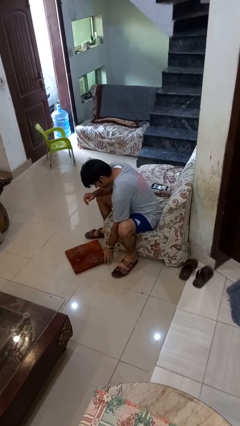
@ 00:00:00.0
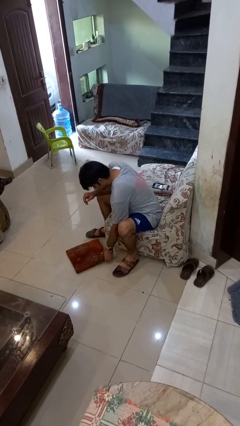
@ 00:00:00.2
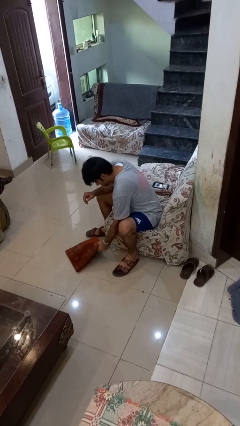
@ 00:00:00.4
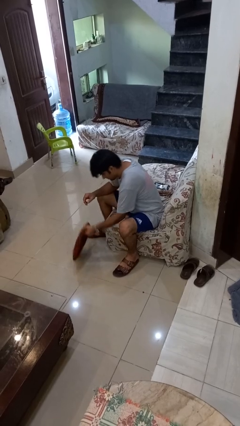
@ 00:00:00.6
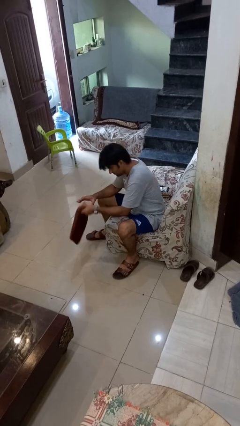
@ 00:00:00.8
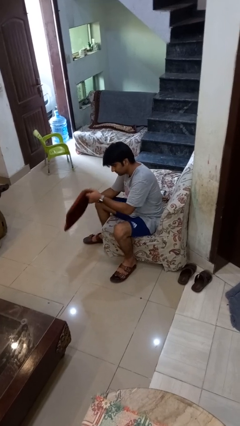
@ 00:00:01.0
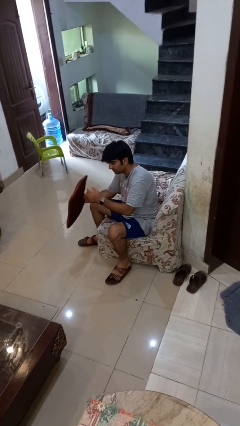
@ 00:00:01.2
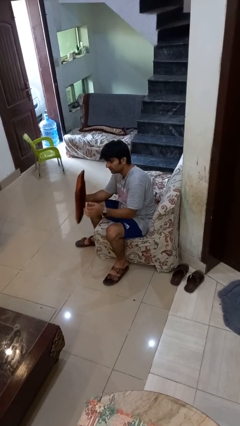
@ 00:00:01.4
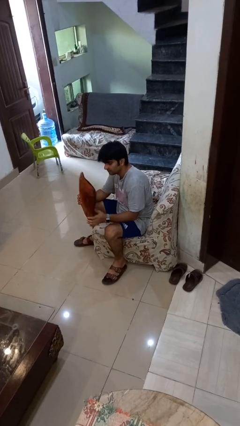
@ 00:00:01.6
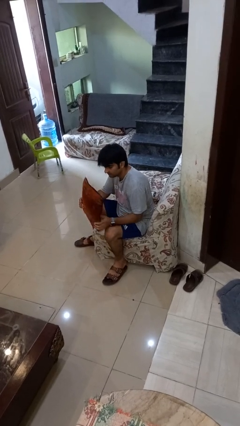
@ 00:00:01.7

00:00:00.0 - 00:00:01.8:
person picks up object from floor

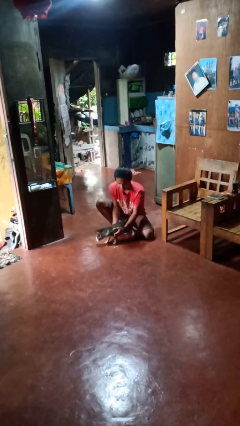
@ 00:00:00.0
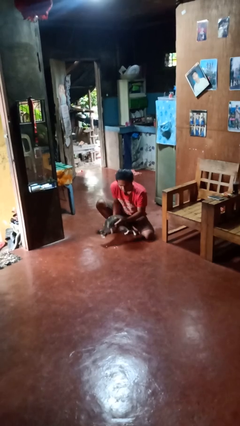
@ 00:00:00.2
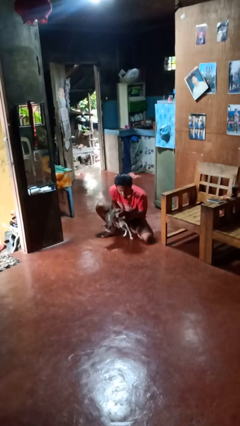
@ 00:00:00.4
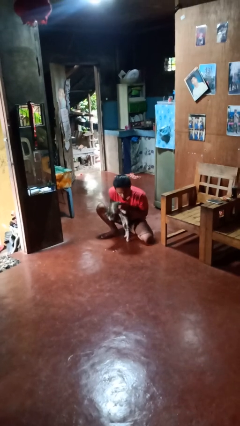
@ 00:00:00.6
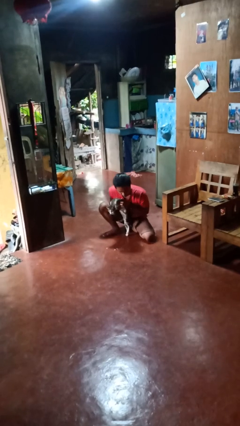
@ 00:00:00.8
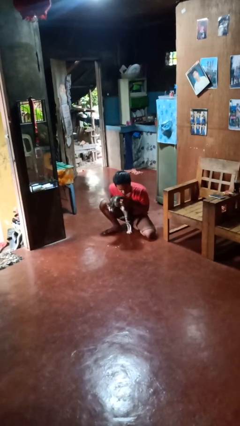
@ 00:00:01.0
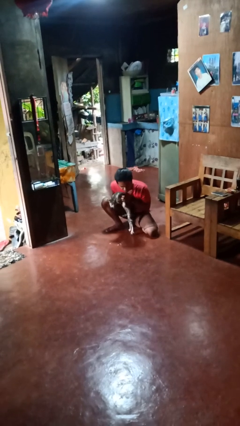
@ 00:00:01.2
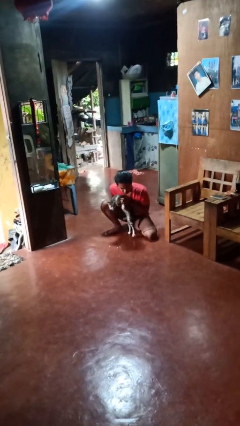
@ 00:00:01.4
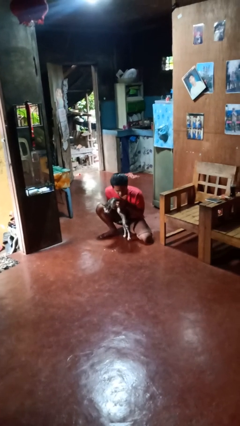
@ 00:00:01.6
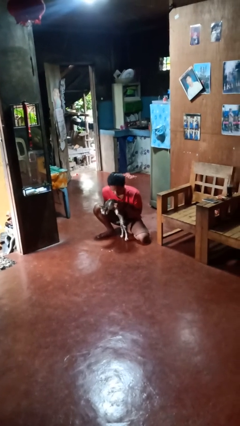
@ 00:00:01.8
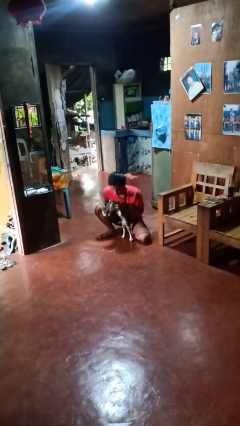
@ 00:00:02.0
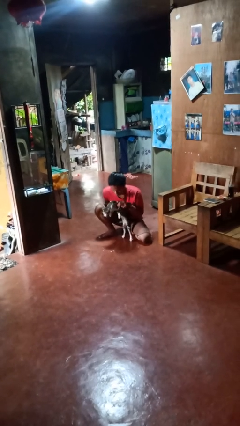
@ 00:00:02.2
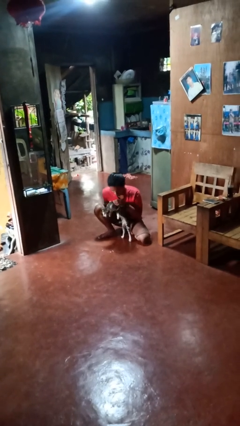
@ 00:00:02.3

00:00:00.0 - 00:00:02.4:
person hugs cat

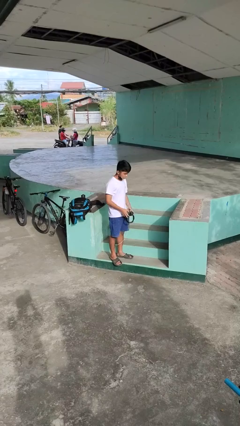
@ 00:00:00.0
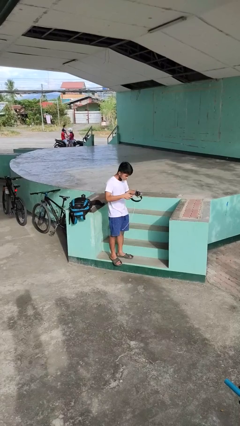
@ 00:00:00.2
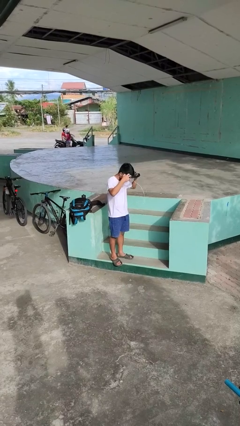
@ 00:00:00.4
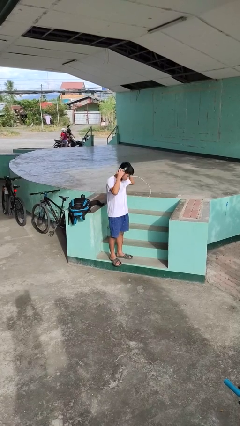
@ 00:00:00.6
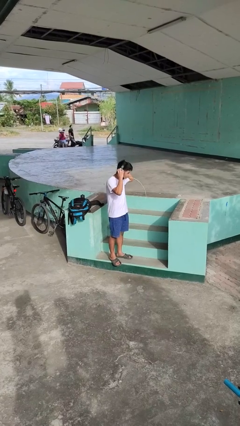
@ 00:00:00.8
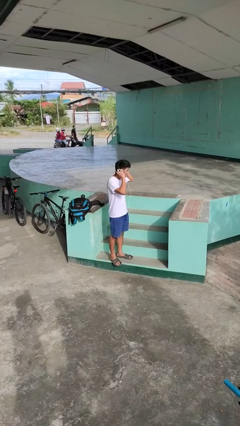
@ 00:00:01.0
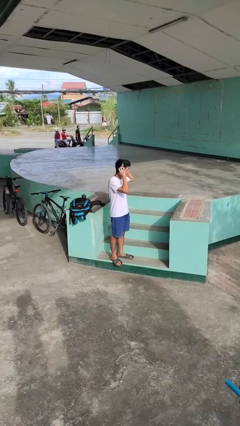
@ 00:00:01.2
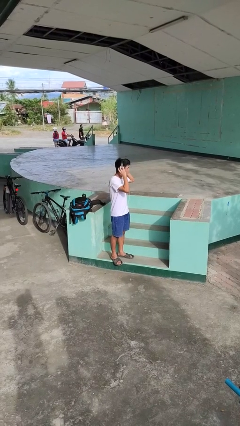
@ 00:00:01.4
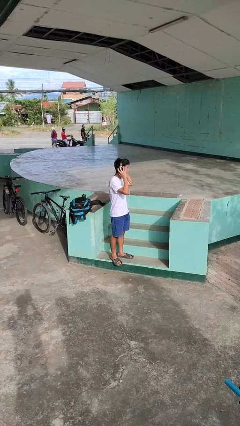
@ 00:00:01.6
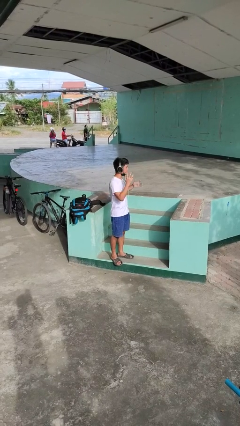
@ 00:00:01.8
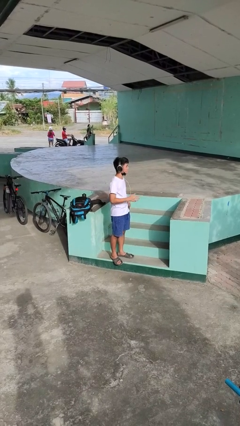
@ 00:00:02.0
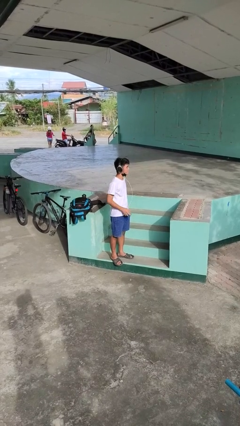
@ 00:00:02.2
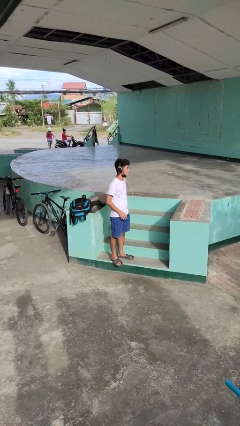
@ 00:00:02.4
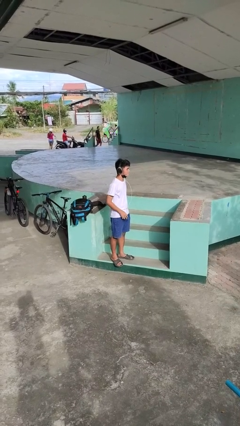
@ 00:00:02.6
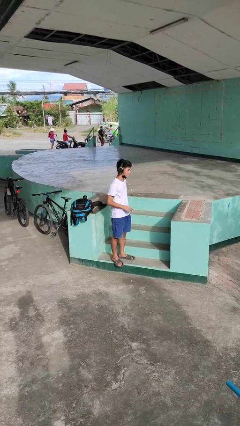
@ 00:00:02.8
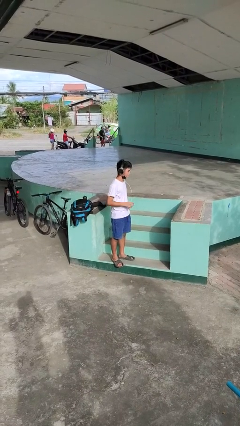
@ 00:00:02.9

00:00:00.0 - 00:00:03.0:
person puts on headphones

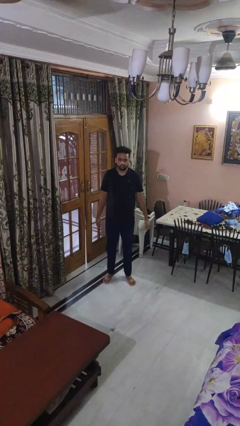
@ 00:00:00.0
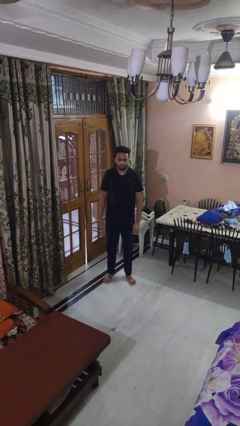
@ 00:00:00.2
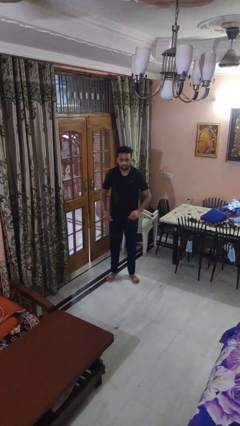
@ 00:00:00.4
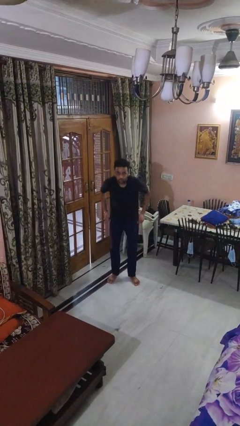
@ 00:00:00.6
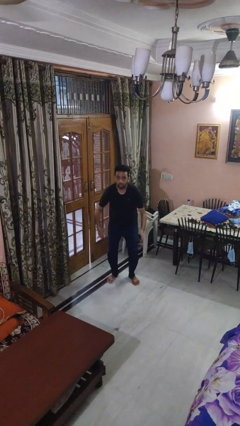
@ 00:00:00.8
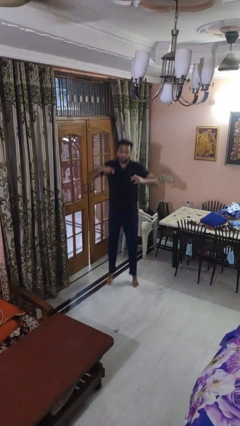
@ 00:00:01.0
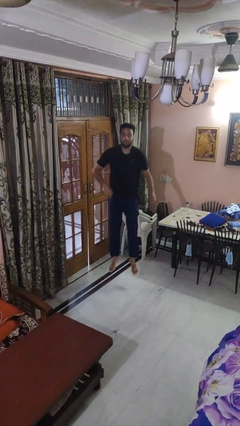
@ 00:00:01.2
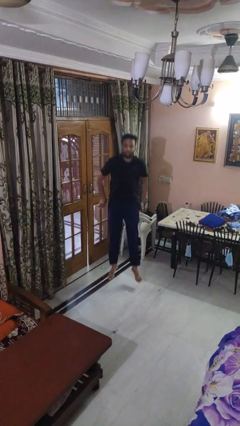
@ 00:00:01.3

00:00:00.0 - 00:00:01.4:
person jumps

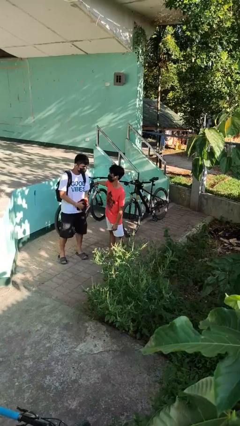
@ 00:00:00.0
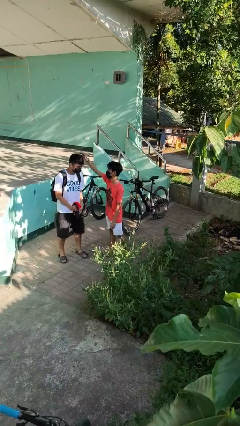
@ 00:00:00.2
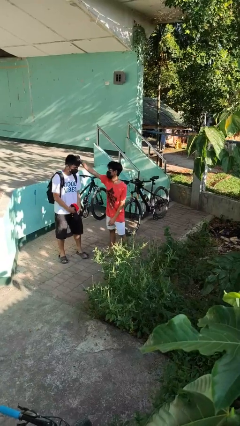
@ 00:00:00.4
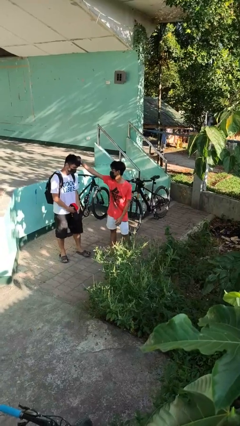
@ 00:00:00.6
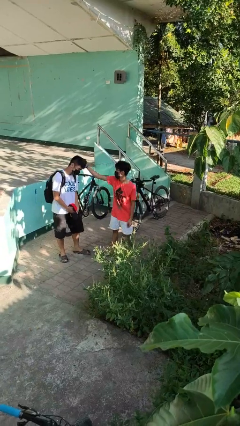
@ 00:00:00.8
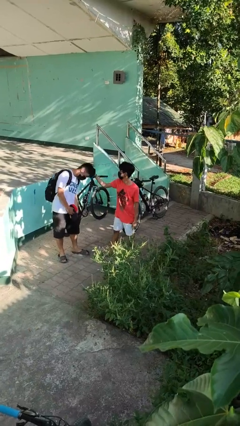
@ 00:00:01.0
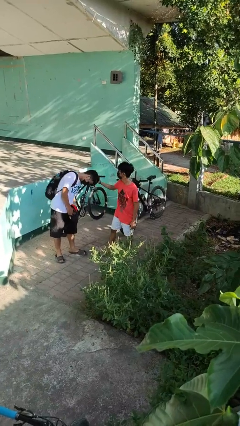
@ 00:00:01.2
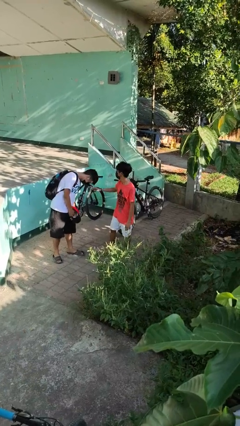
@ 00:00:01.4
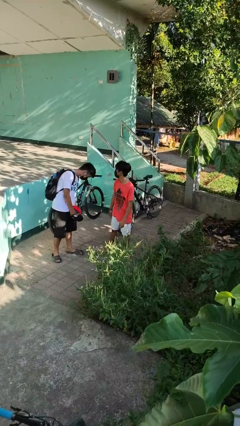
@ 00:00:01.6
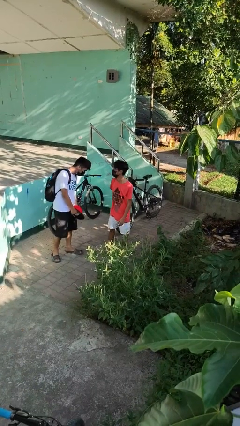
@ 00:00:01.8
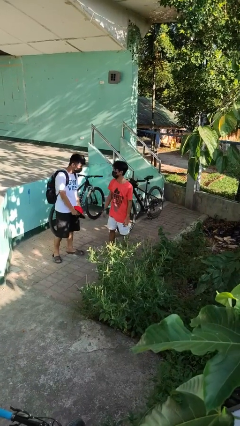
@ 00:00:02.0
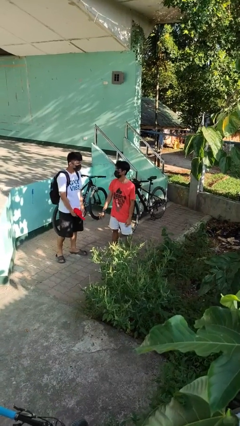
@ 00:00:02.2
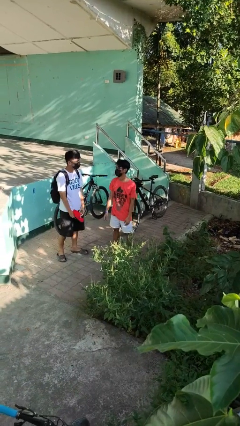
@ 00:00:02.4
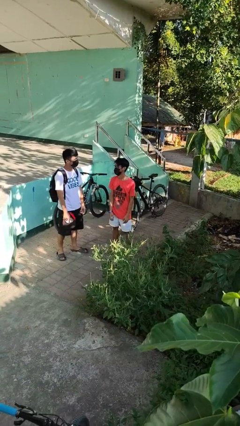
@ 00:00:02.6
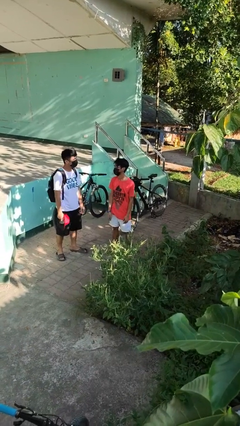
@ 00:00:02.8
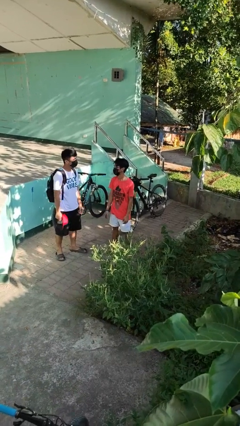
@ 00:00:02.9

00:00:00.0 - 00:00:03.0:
person grabs person by hair

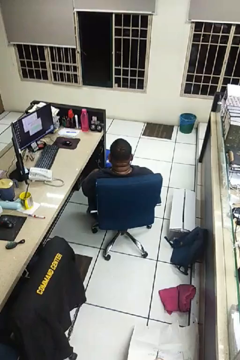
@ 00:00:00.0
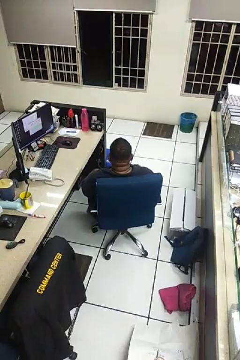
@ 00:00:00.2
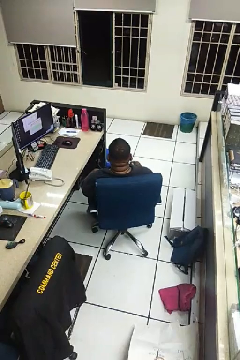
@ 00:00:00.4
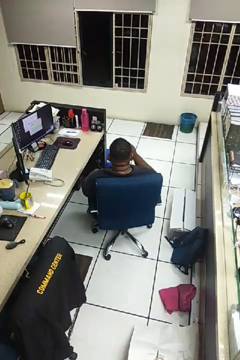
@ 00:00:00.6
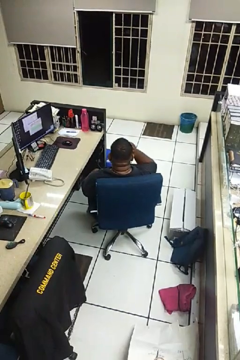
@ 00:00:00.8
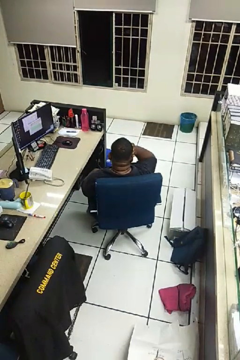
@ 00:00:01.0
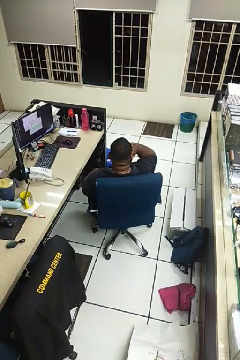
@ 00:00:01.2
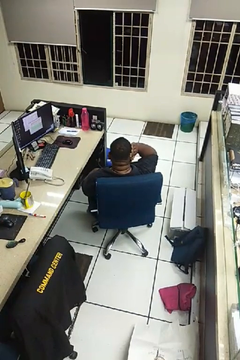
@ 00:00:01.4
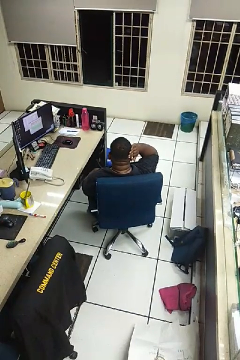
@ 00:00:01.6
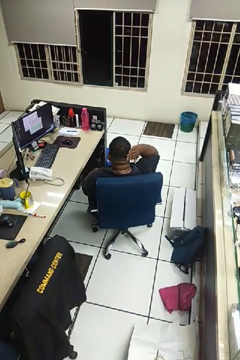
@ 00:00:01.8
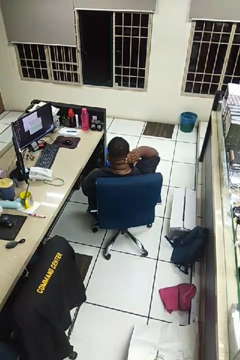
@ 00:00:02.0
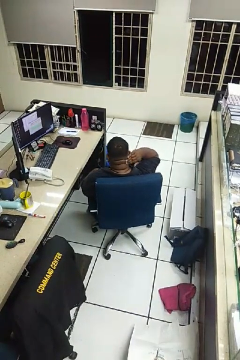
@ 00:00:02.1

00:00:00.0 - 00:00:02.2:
person strokes hair

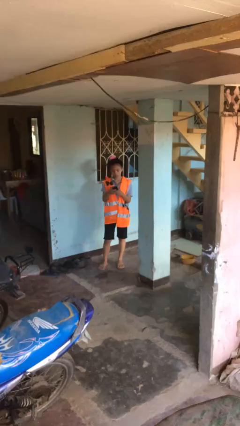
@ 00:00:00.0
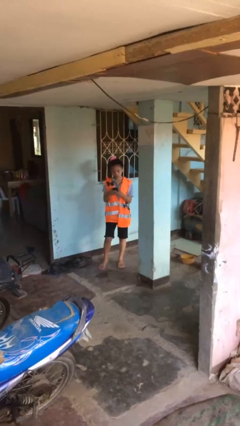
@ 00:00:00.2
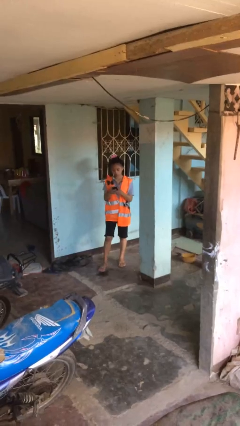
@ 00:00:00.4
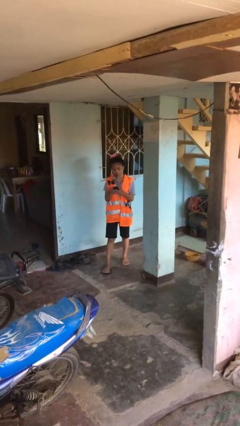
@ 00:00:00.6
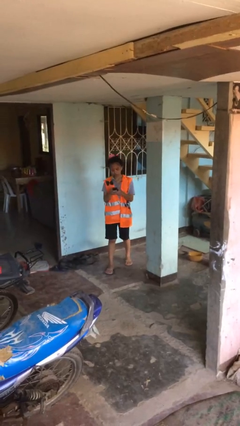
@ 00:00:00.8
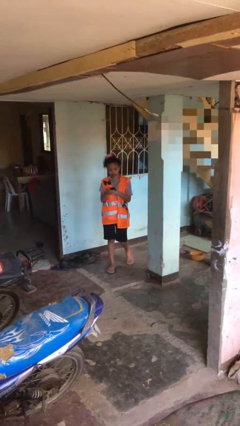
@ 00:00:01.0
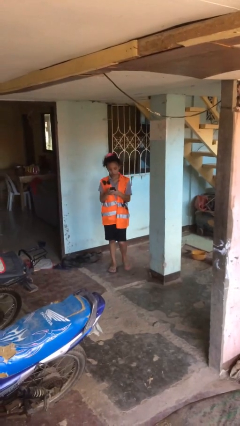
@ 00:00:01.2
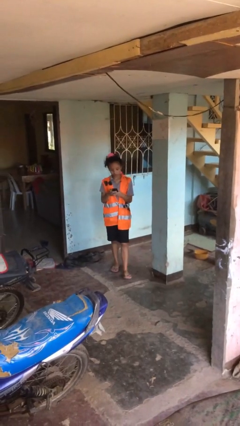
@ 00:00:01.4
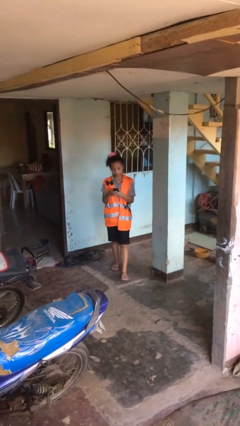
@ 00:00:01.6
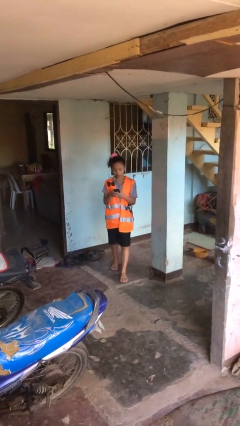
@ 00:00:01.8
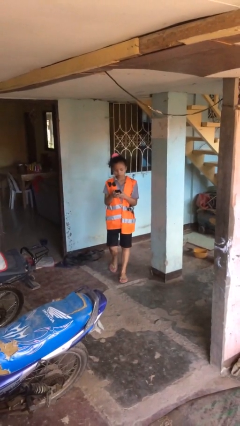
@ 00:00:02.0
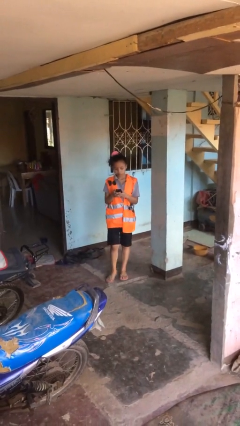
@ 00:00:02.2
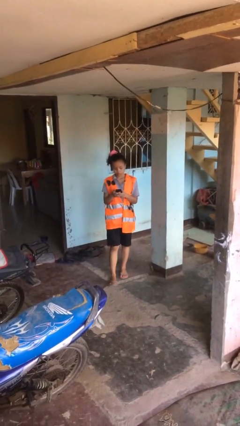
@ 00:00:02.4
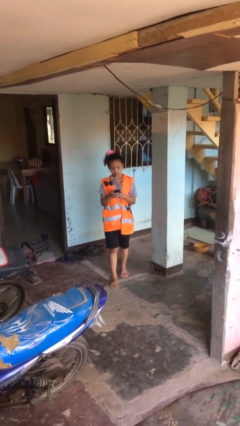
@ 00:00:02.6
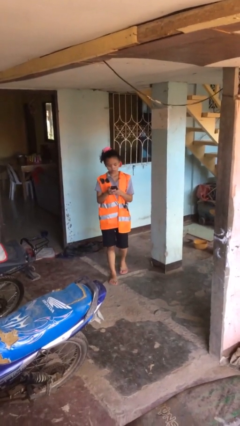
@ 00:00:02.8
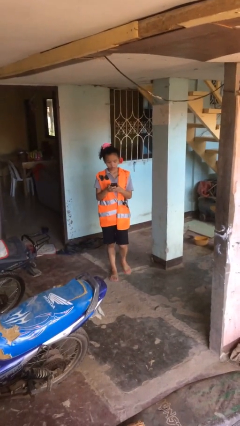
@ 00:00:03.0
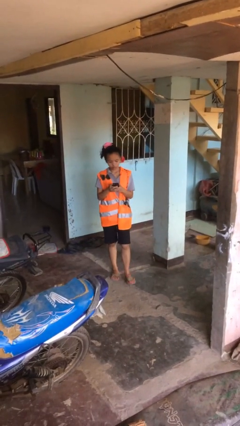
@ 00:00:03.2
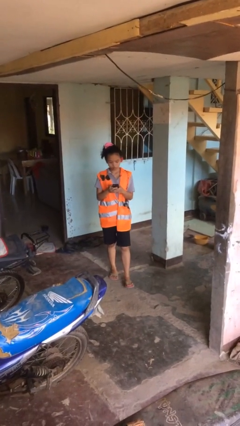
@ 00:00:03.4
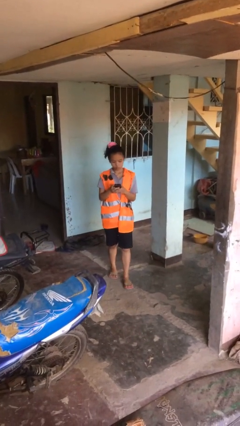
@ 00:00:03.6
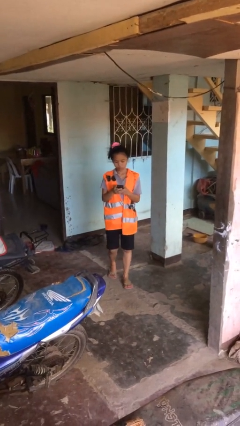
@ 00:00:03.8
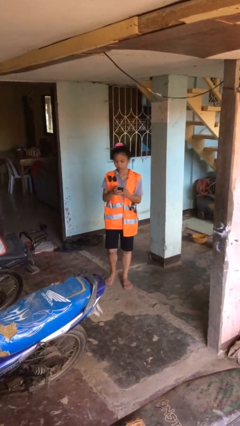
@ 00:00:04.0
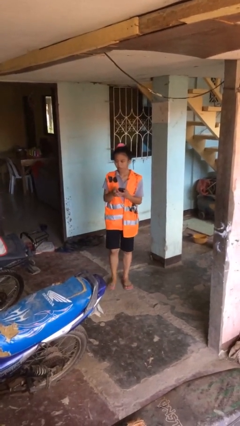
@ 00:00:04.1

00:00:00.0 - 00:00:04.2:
person texts on phone
